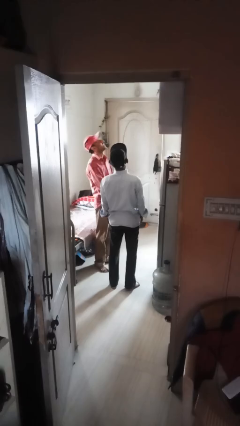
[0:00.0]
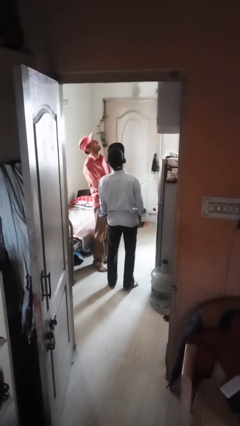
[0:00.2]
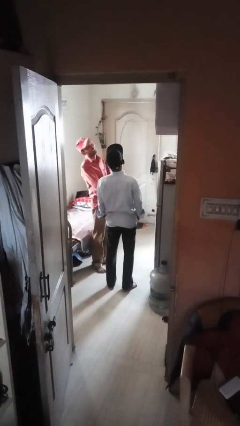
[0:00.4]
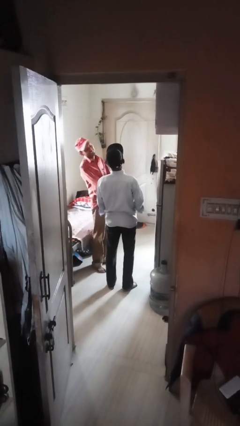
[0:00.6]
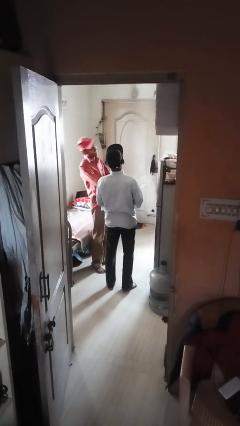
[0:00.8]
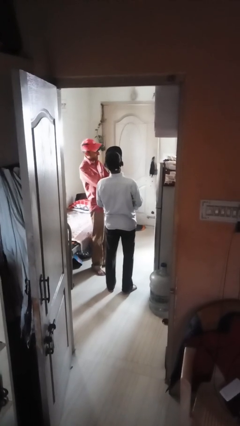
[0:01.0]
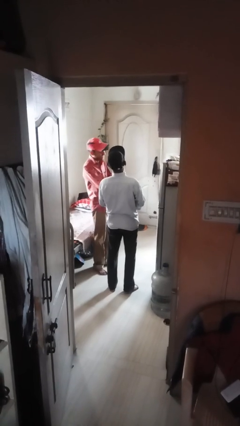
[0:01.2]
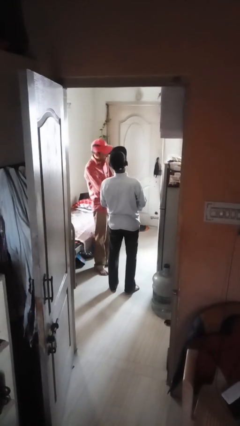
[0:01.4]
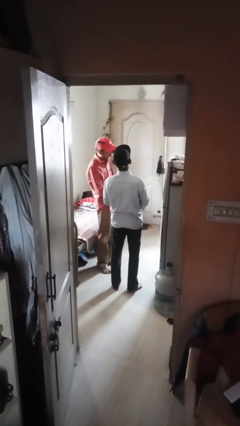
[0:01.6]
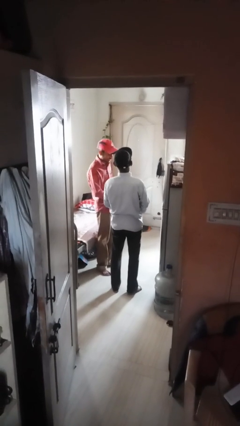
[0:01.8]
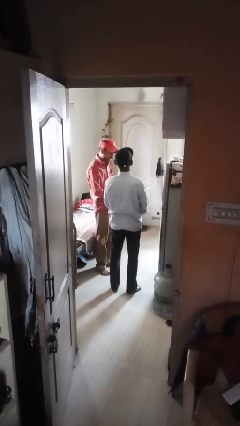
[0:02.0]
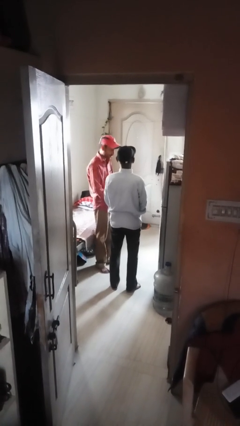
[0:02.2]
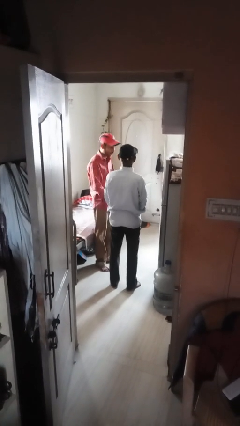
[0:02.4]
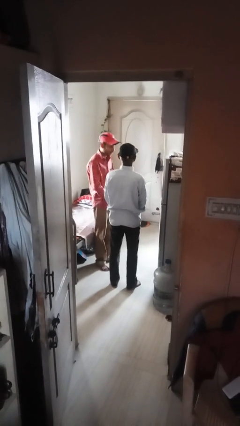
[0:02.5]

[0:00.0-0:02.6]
person laughs with person

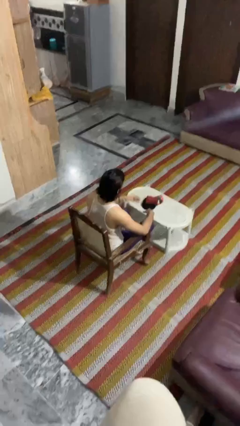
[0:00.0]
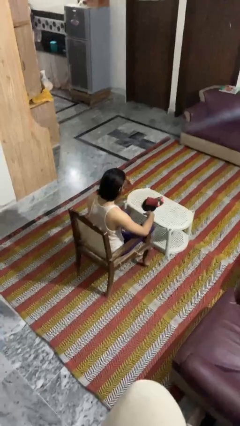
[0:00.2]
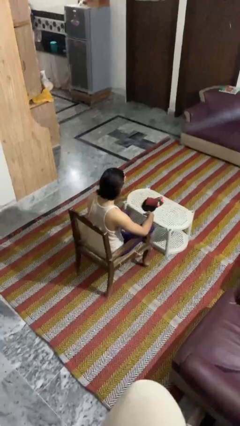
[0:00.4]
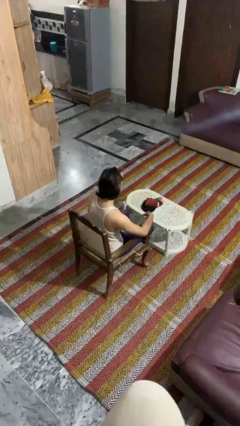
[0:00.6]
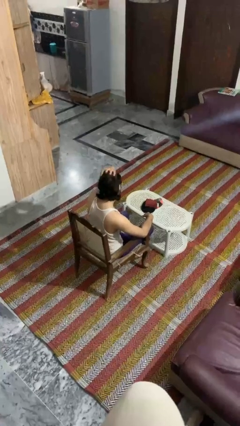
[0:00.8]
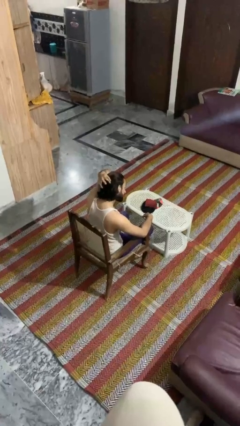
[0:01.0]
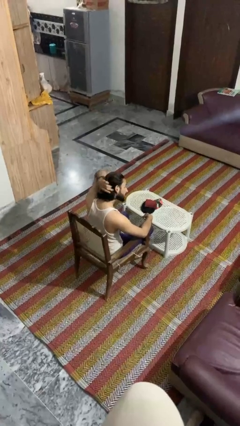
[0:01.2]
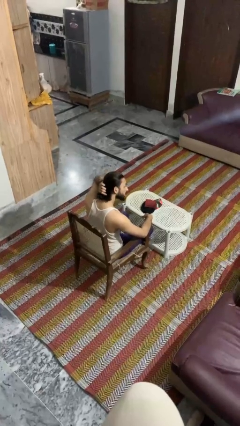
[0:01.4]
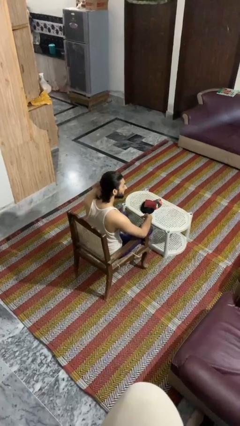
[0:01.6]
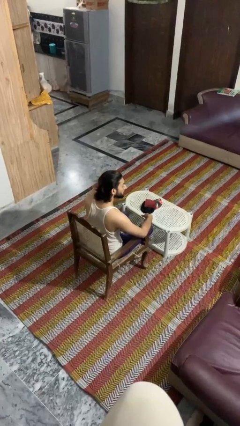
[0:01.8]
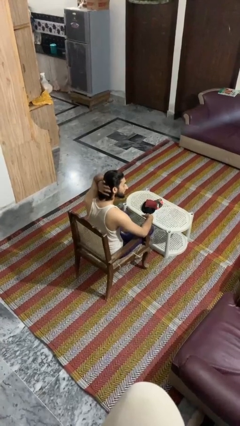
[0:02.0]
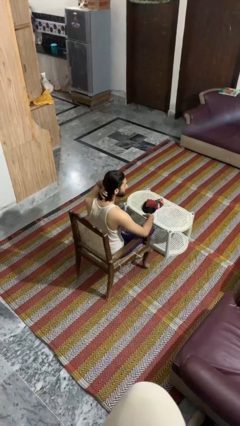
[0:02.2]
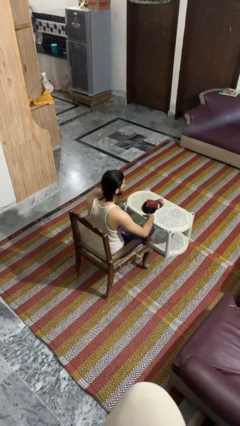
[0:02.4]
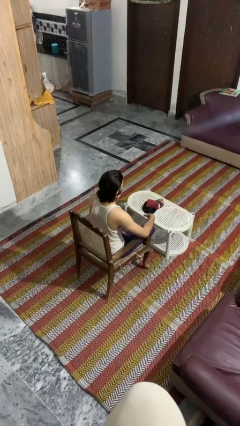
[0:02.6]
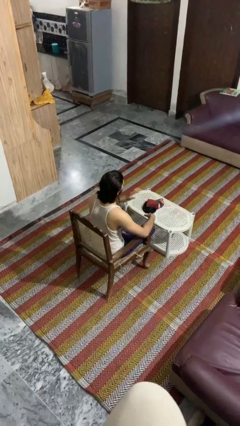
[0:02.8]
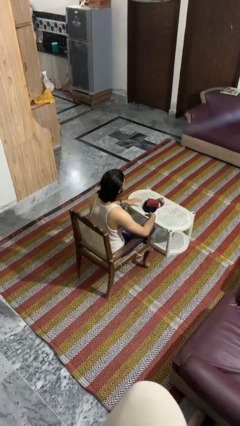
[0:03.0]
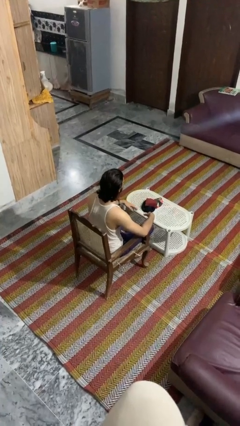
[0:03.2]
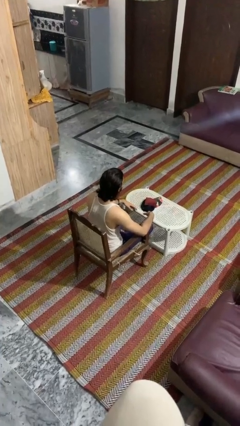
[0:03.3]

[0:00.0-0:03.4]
person strokes hair

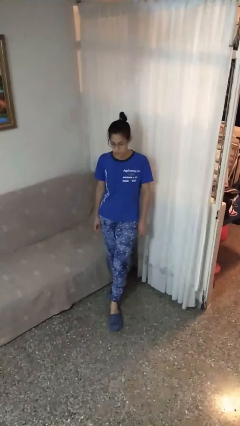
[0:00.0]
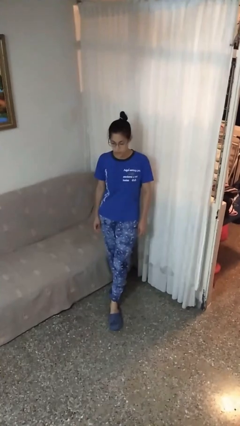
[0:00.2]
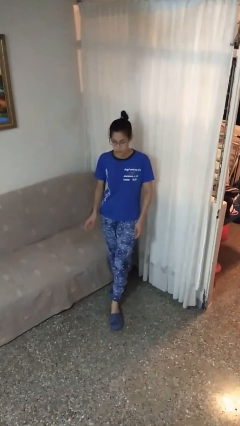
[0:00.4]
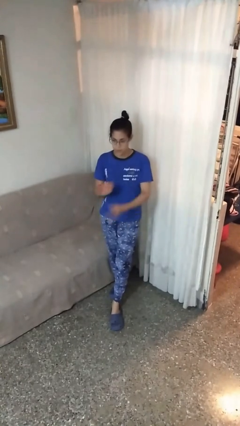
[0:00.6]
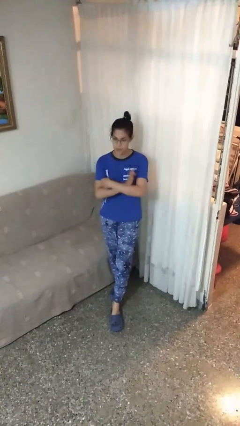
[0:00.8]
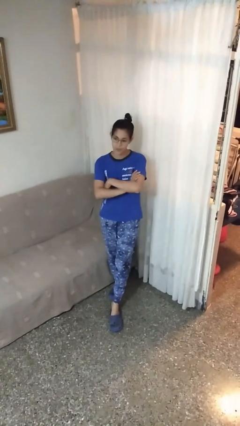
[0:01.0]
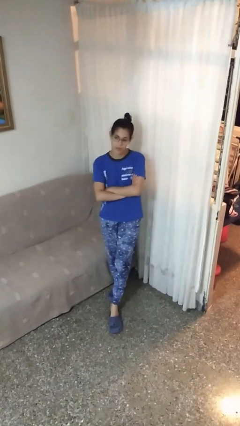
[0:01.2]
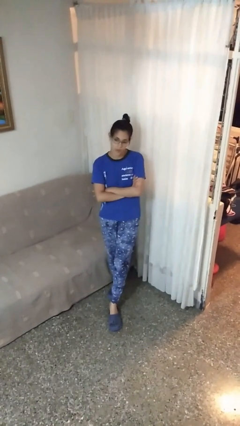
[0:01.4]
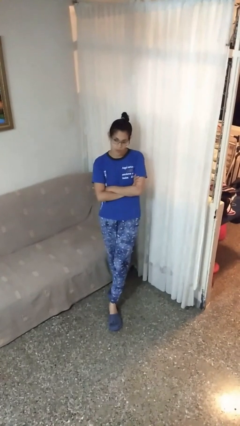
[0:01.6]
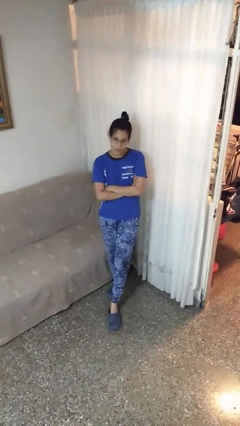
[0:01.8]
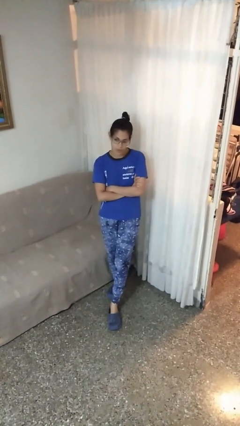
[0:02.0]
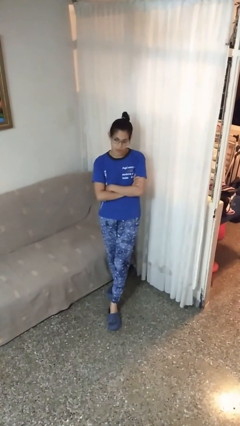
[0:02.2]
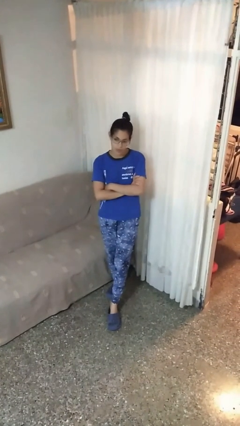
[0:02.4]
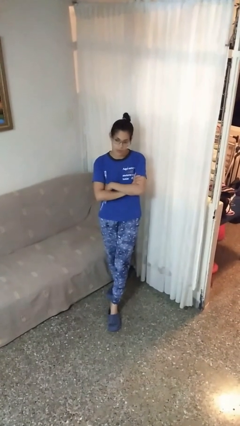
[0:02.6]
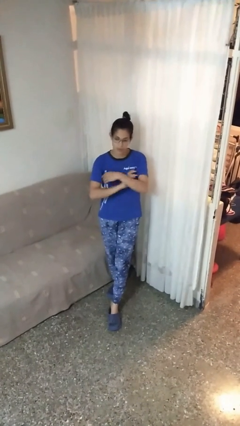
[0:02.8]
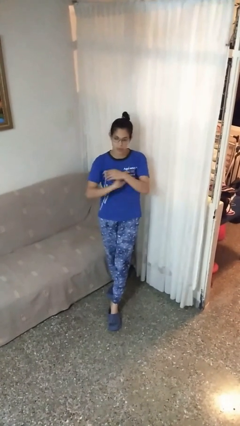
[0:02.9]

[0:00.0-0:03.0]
person crosses arms

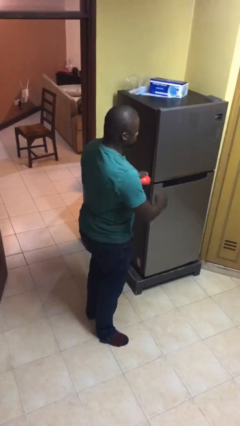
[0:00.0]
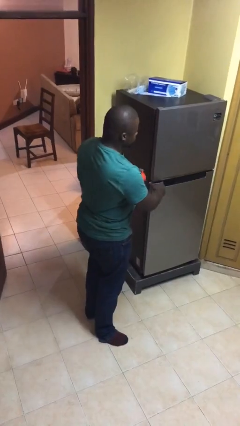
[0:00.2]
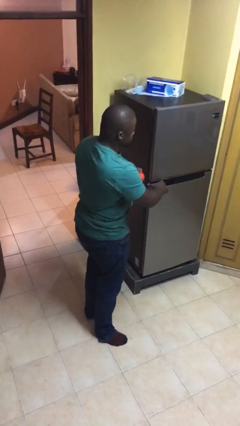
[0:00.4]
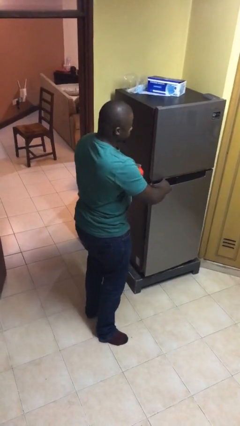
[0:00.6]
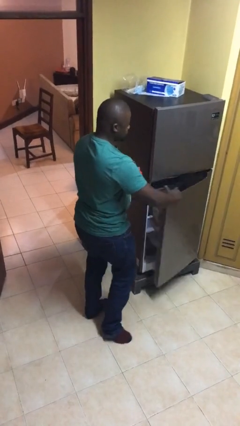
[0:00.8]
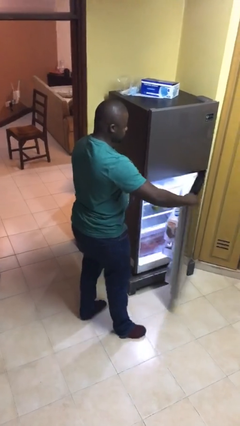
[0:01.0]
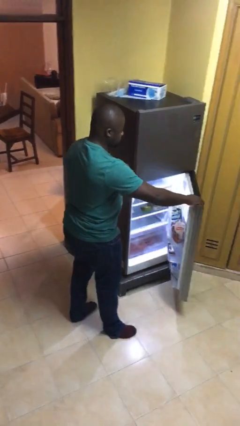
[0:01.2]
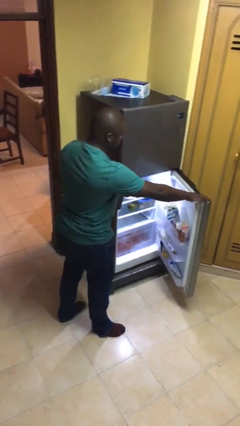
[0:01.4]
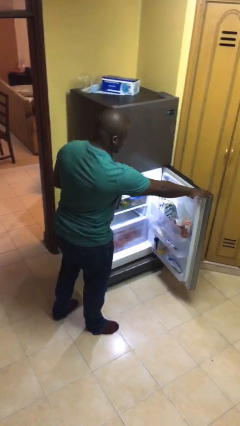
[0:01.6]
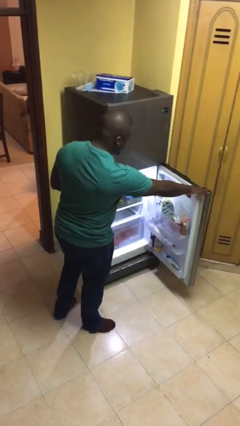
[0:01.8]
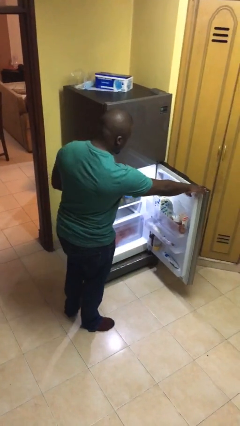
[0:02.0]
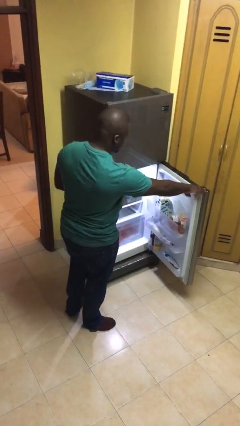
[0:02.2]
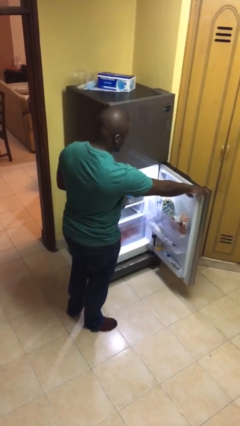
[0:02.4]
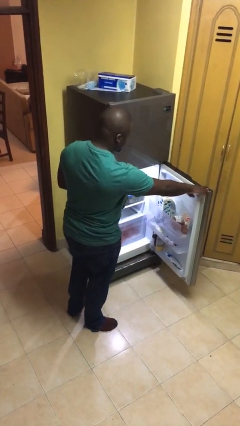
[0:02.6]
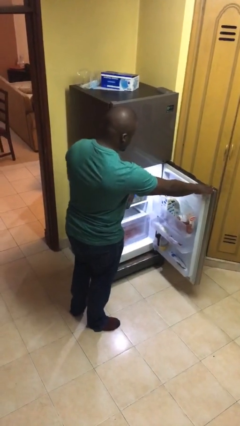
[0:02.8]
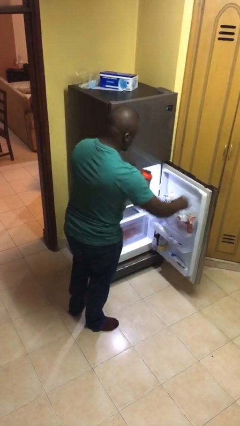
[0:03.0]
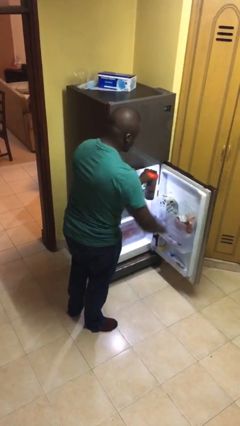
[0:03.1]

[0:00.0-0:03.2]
person opens refrigerator

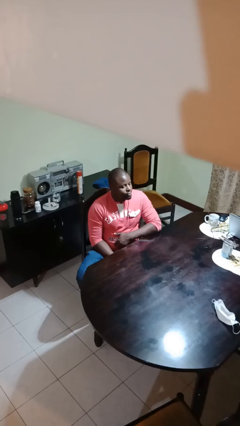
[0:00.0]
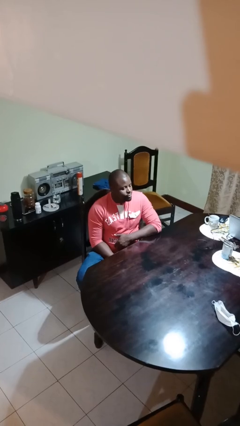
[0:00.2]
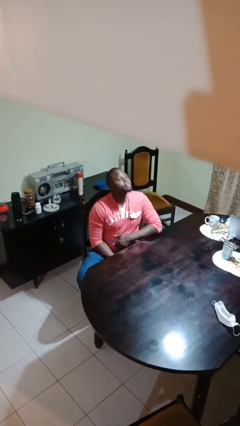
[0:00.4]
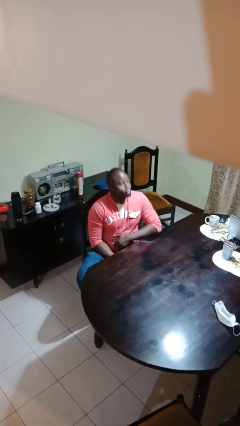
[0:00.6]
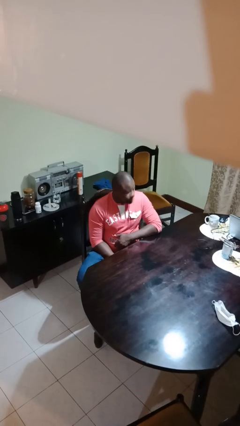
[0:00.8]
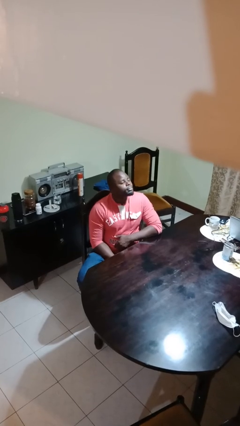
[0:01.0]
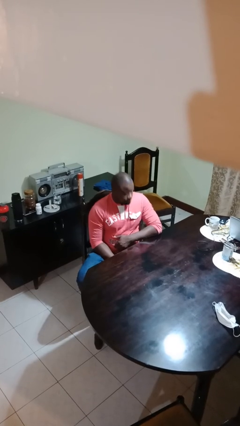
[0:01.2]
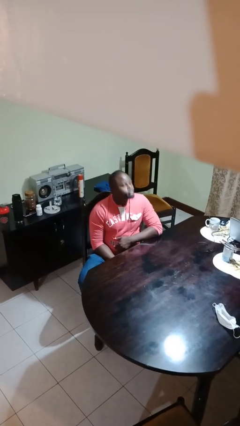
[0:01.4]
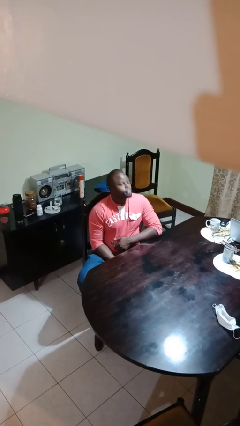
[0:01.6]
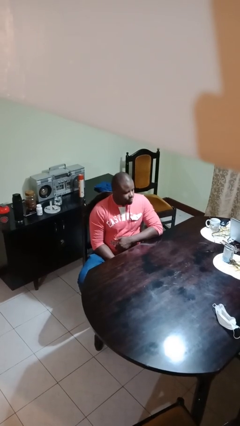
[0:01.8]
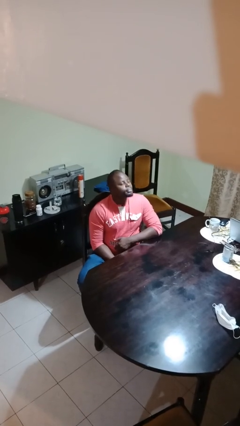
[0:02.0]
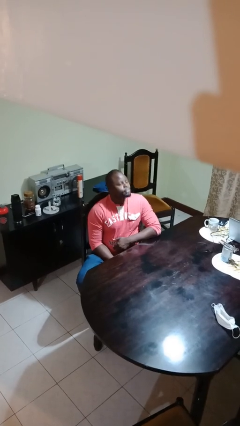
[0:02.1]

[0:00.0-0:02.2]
person nods head

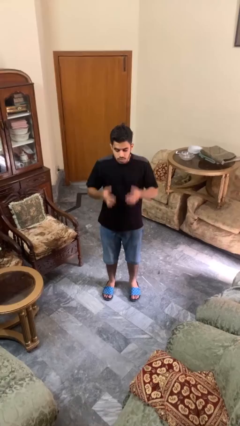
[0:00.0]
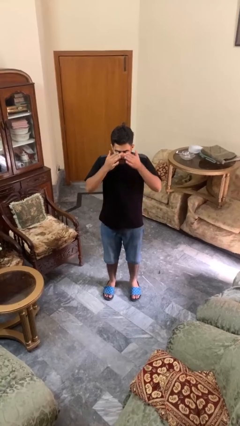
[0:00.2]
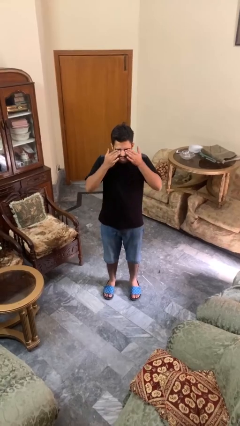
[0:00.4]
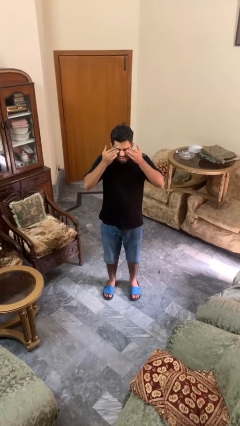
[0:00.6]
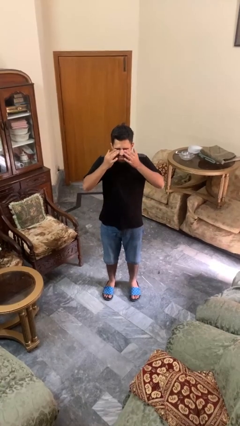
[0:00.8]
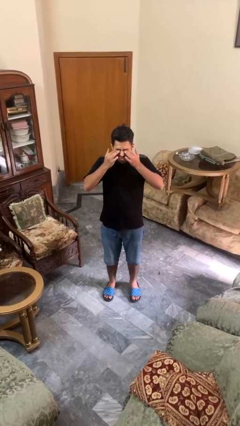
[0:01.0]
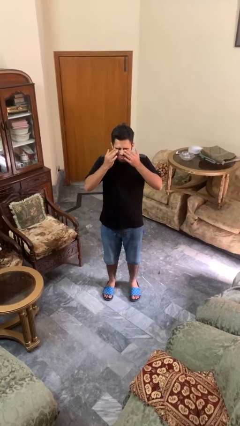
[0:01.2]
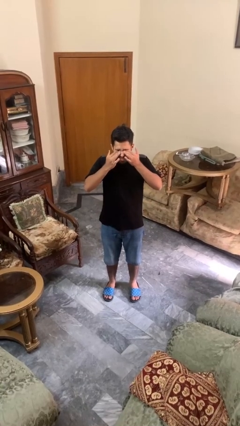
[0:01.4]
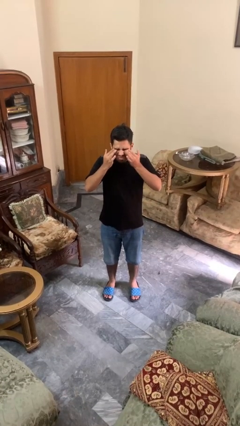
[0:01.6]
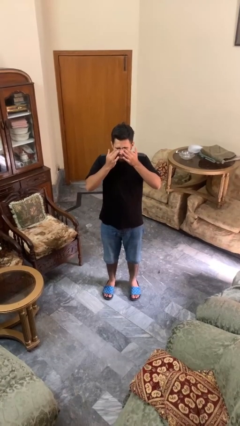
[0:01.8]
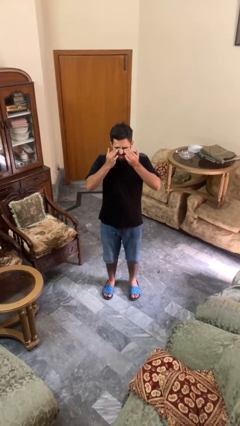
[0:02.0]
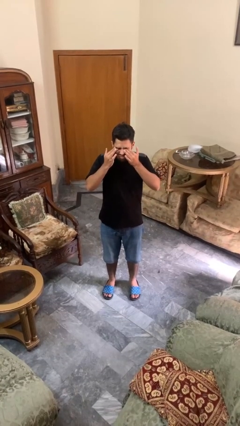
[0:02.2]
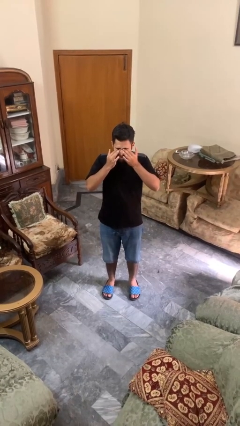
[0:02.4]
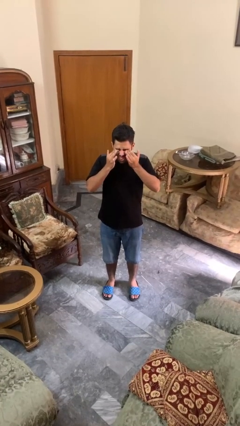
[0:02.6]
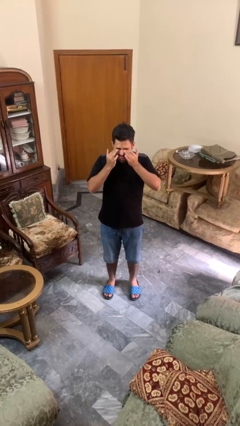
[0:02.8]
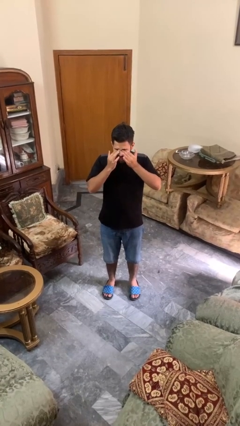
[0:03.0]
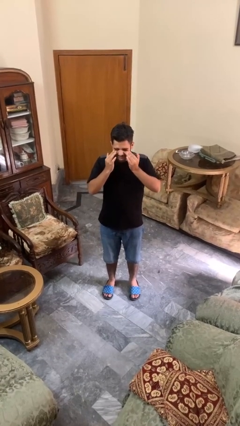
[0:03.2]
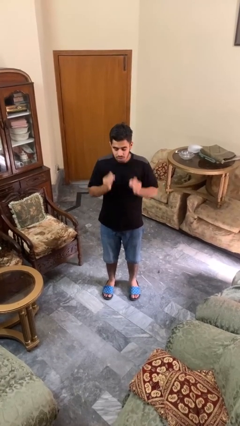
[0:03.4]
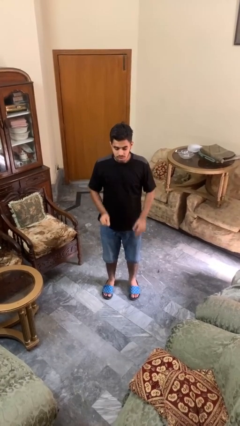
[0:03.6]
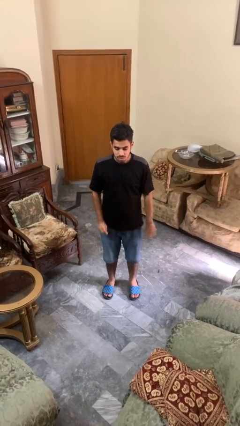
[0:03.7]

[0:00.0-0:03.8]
person rubs eyes
